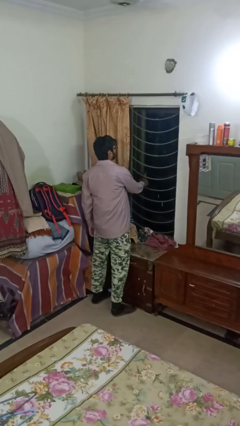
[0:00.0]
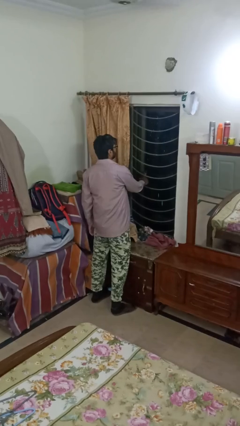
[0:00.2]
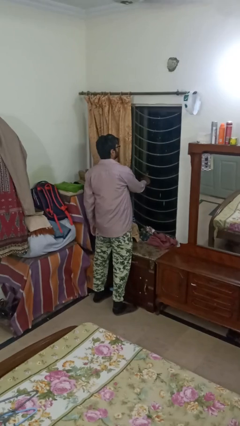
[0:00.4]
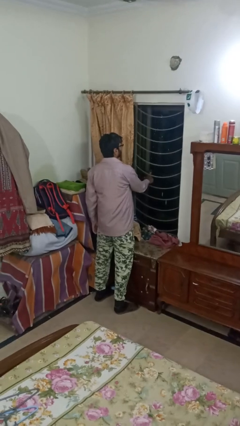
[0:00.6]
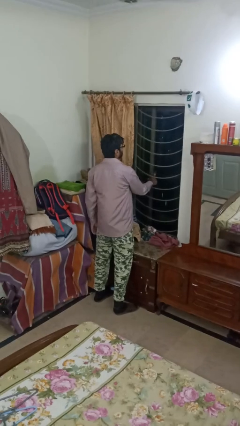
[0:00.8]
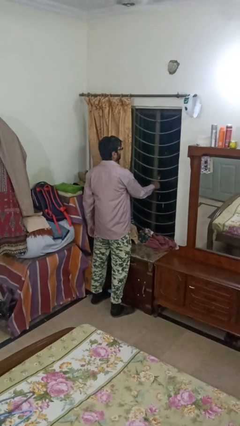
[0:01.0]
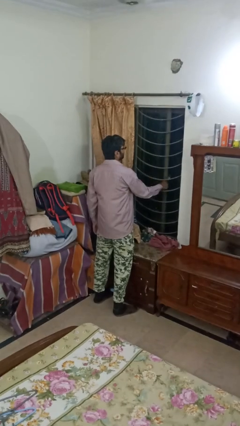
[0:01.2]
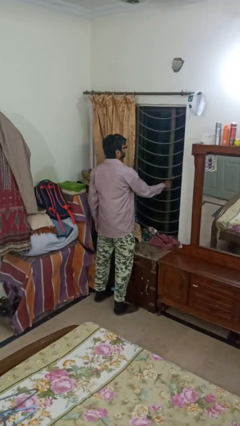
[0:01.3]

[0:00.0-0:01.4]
person closes home window

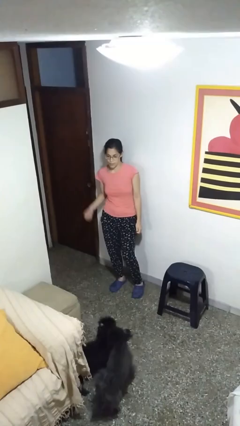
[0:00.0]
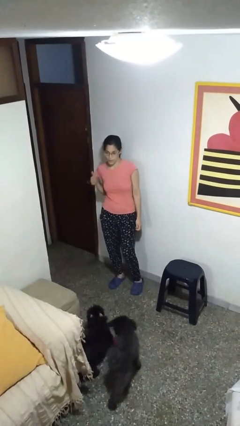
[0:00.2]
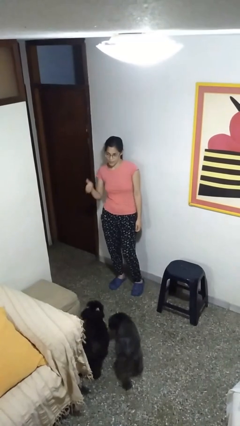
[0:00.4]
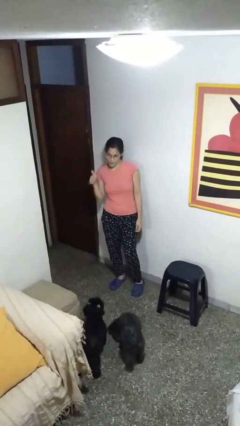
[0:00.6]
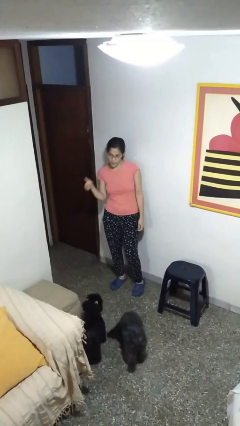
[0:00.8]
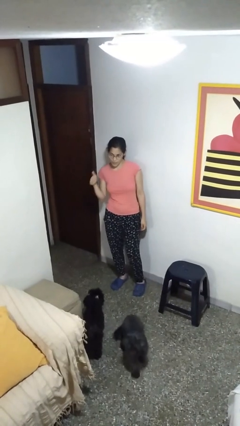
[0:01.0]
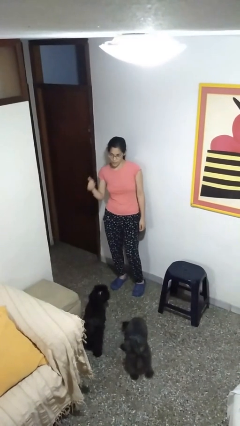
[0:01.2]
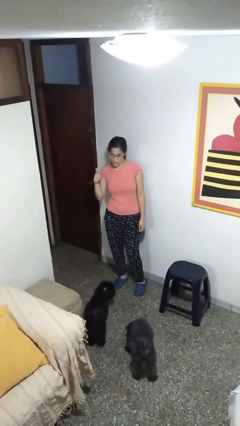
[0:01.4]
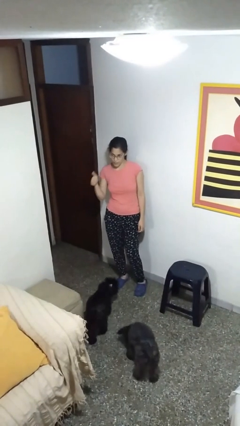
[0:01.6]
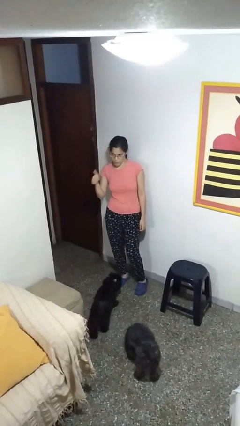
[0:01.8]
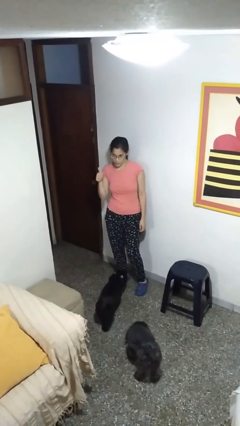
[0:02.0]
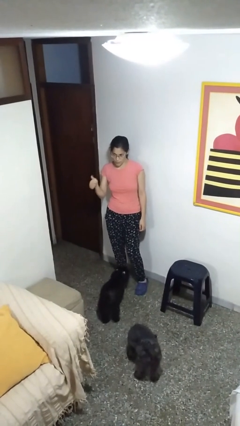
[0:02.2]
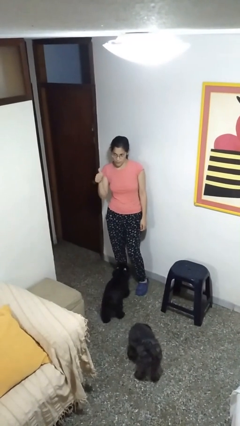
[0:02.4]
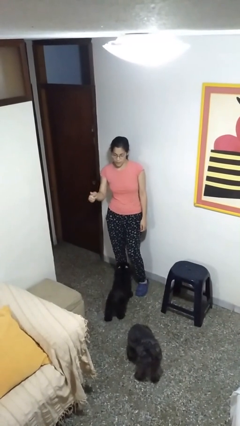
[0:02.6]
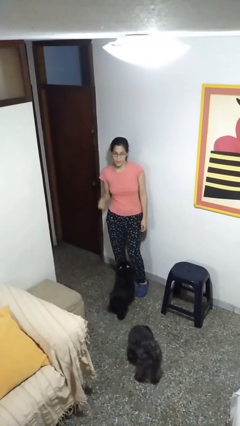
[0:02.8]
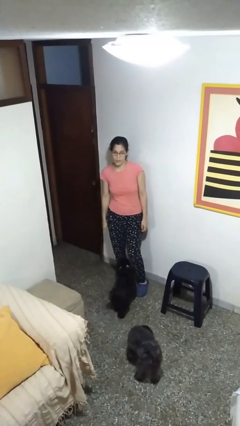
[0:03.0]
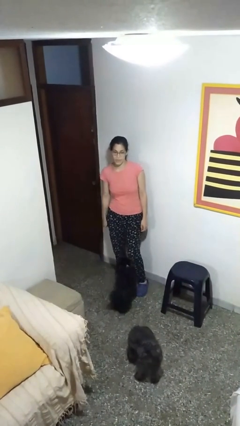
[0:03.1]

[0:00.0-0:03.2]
person gestures thumbs up

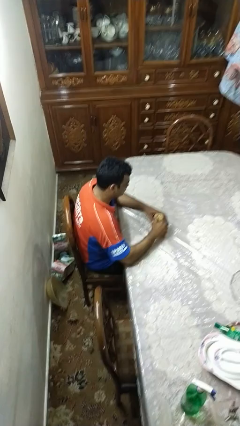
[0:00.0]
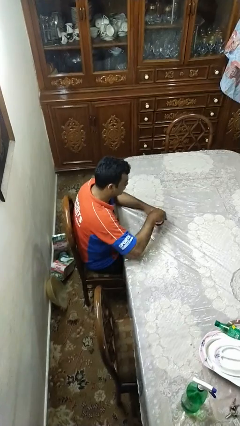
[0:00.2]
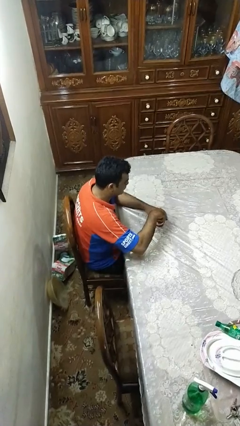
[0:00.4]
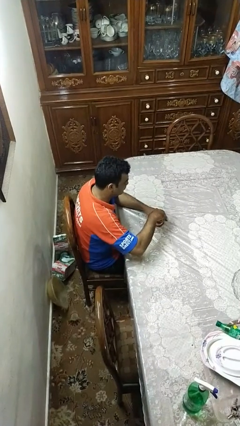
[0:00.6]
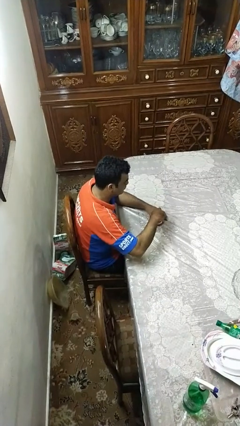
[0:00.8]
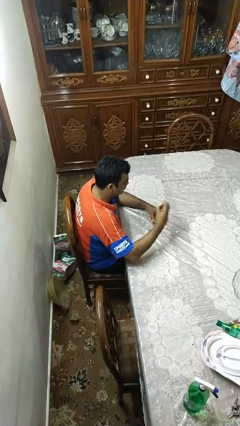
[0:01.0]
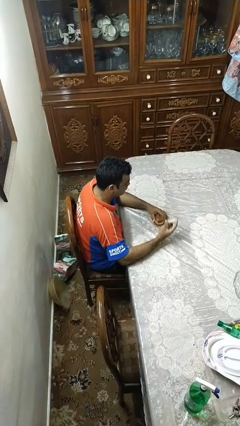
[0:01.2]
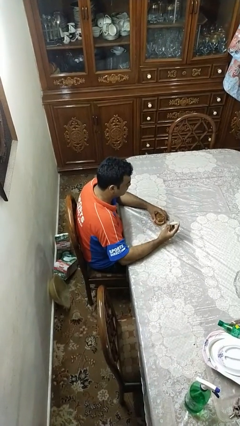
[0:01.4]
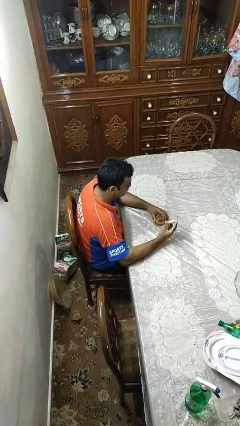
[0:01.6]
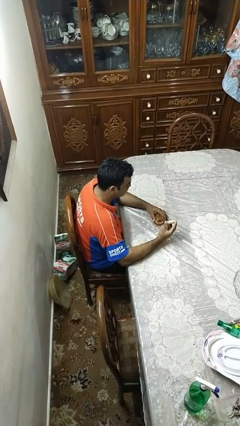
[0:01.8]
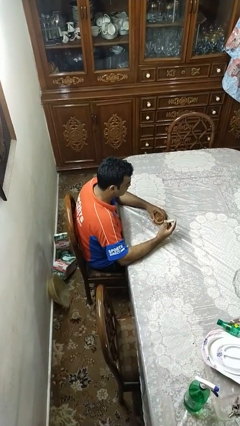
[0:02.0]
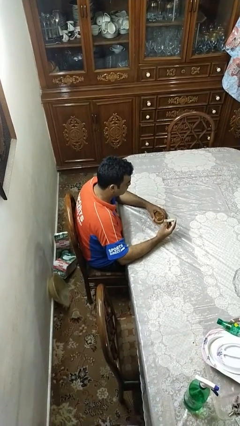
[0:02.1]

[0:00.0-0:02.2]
person opens jar

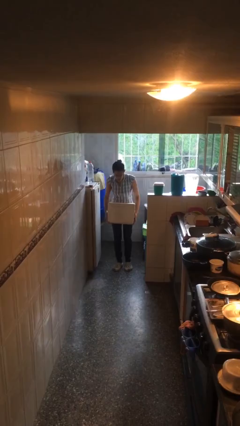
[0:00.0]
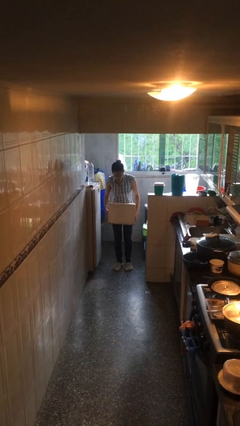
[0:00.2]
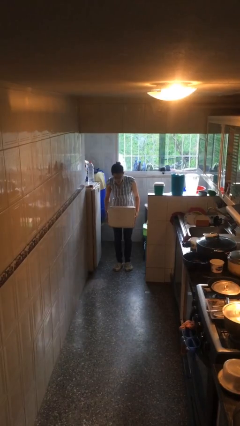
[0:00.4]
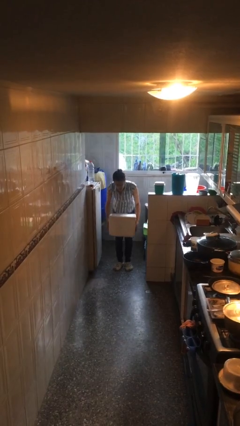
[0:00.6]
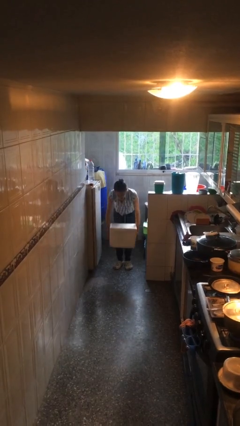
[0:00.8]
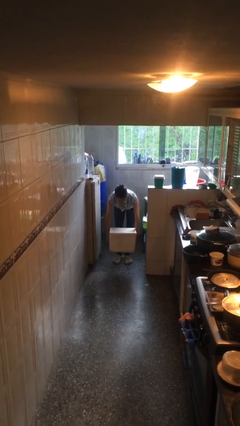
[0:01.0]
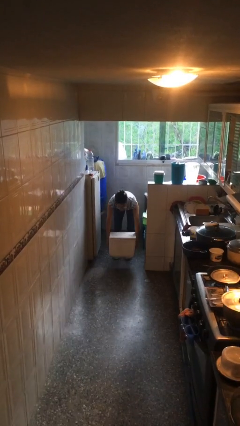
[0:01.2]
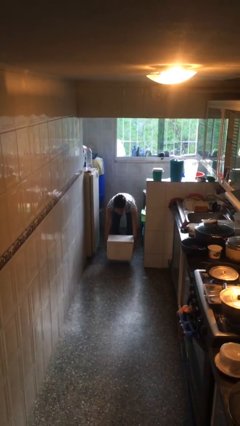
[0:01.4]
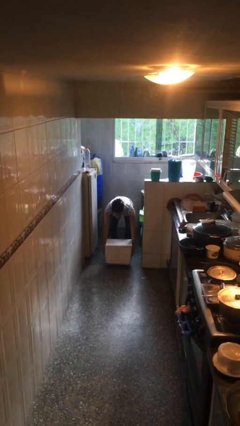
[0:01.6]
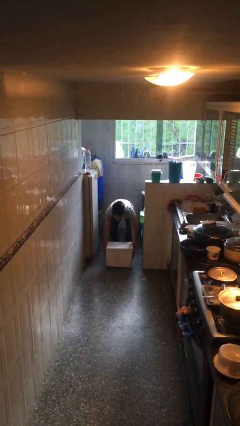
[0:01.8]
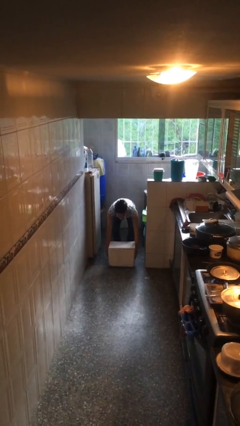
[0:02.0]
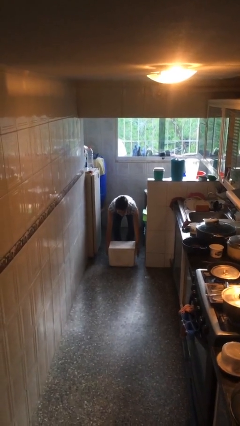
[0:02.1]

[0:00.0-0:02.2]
person puts down object on floor

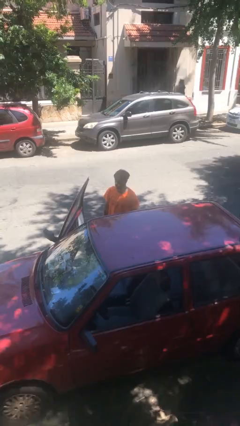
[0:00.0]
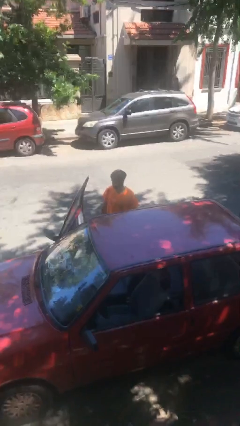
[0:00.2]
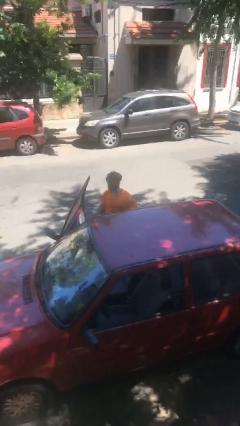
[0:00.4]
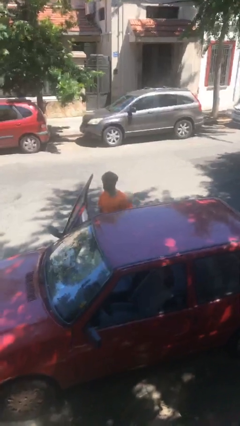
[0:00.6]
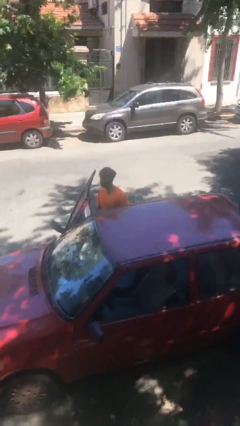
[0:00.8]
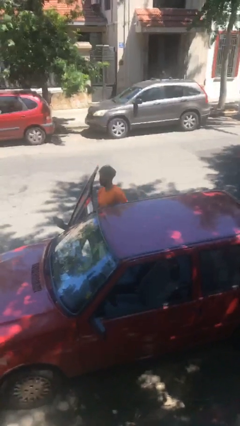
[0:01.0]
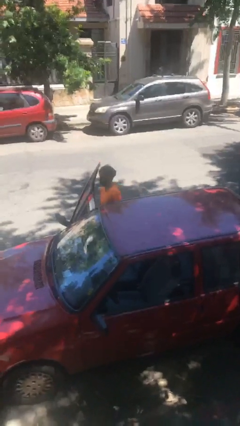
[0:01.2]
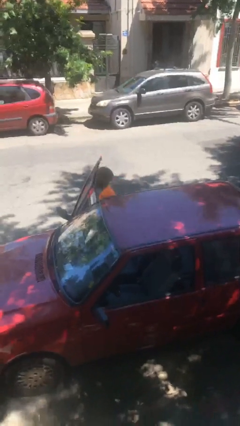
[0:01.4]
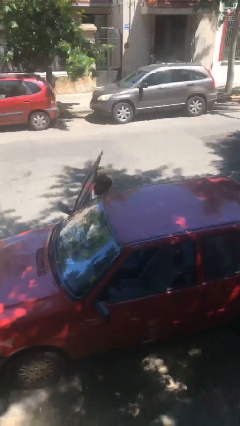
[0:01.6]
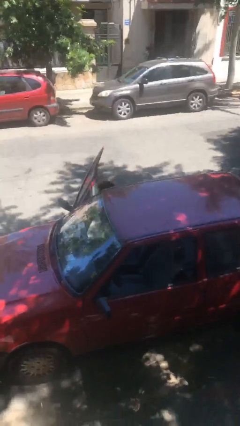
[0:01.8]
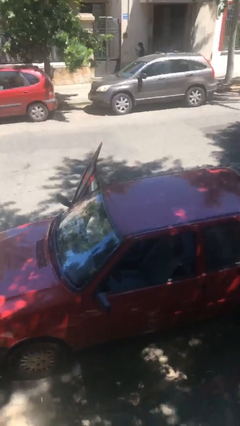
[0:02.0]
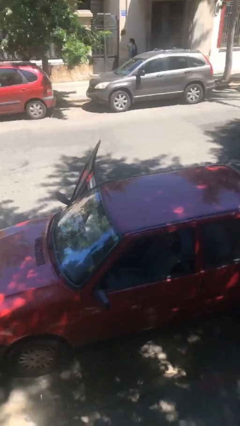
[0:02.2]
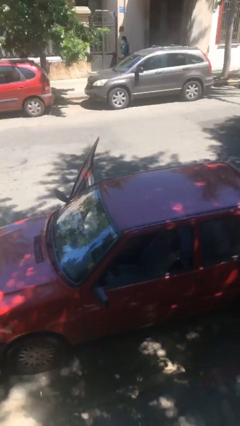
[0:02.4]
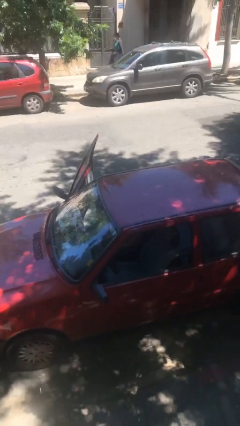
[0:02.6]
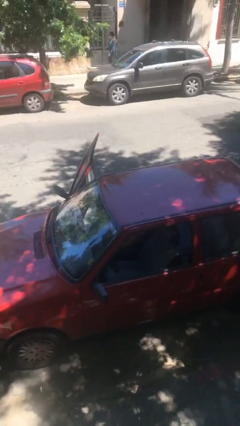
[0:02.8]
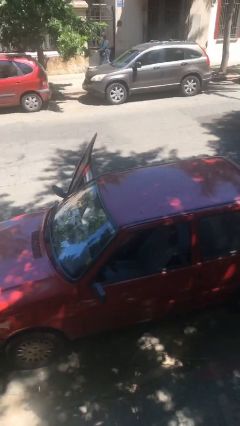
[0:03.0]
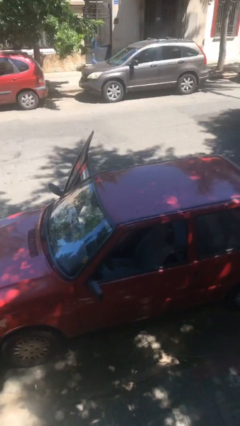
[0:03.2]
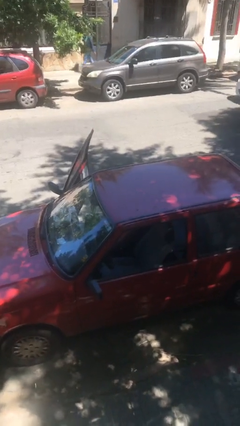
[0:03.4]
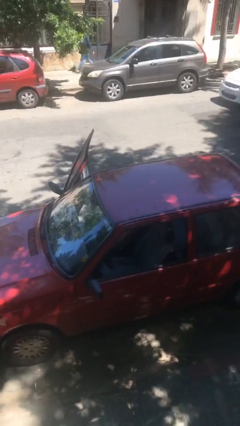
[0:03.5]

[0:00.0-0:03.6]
person enters car

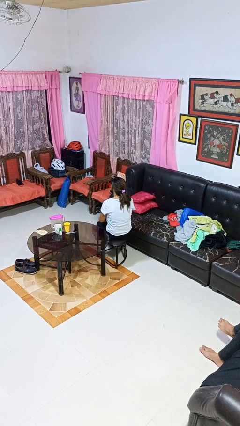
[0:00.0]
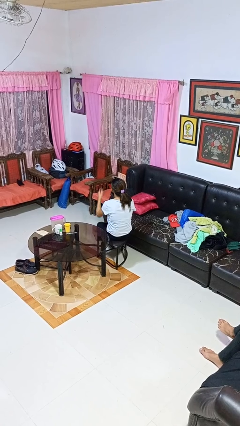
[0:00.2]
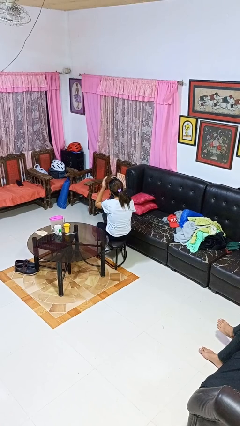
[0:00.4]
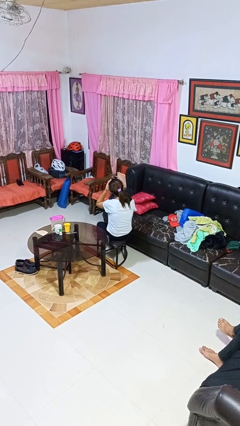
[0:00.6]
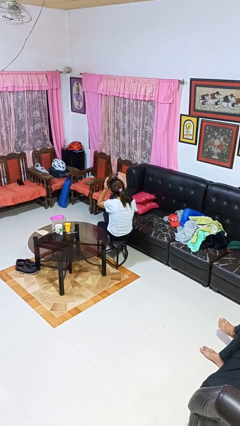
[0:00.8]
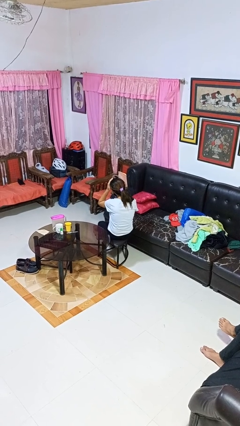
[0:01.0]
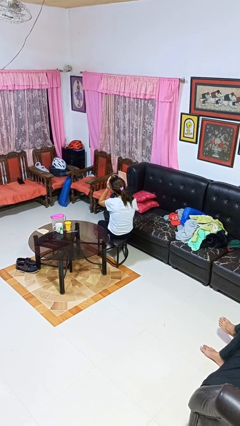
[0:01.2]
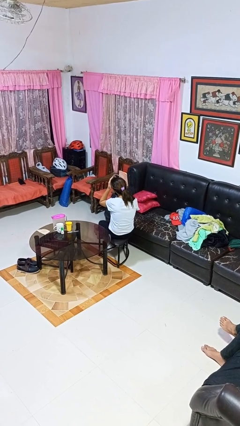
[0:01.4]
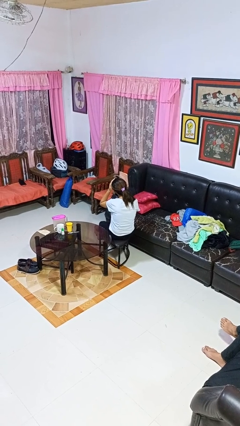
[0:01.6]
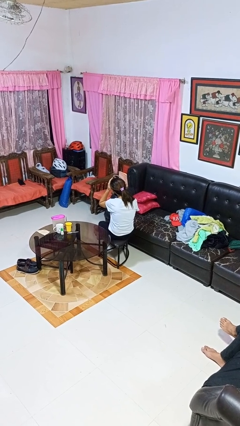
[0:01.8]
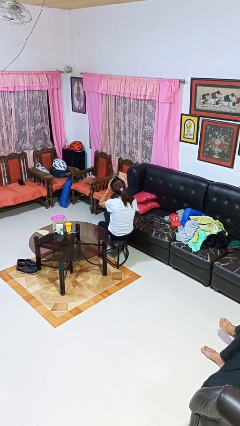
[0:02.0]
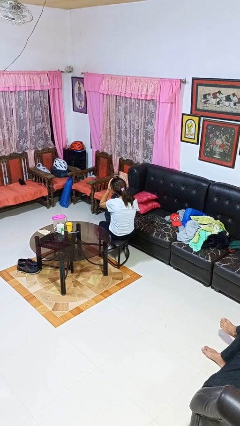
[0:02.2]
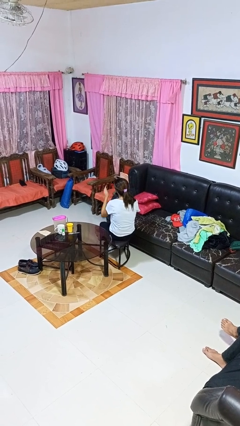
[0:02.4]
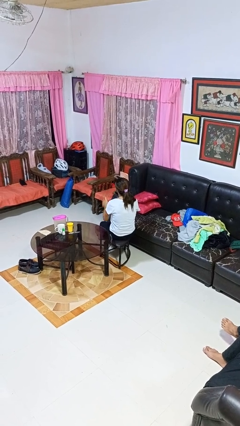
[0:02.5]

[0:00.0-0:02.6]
person pats head

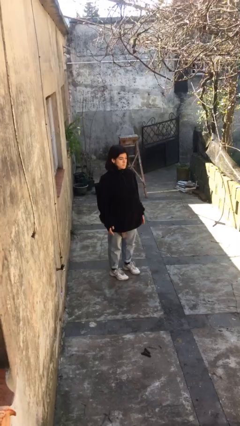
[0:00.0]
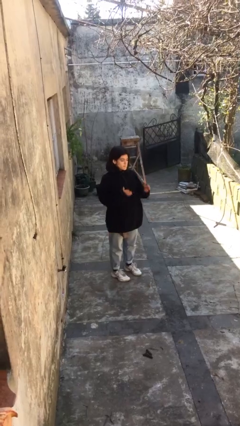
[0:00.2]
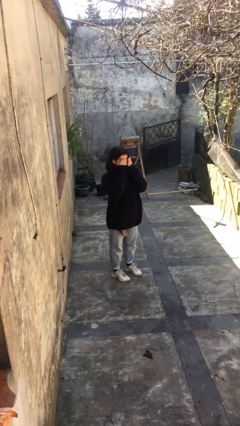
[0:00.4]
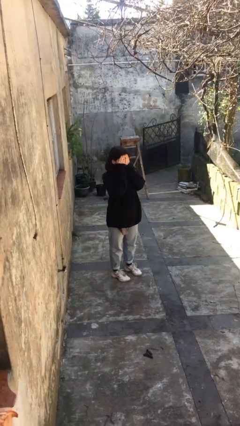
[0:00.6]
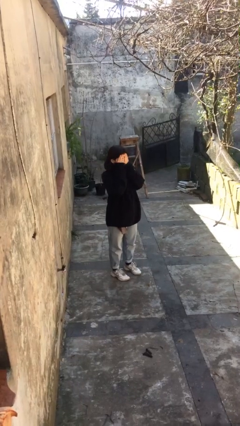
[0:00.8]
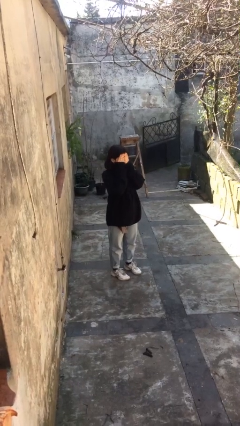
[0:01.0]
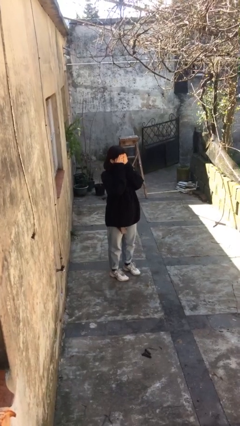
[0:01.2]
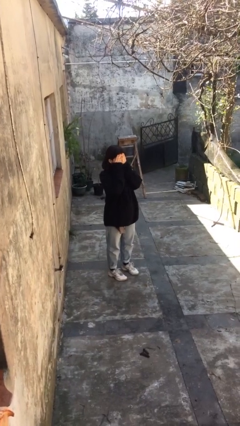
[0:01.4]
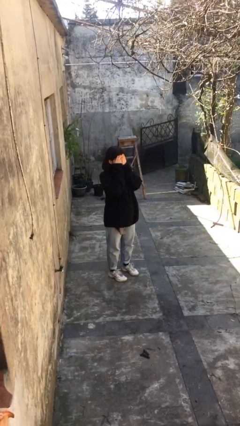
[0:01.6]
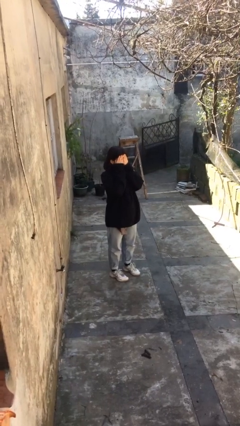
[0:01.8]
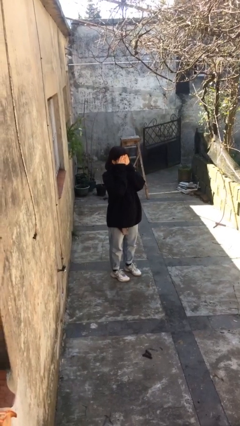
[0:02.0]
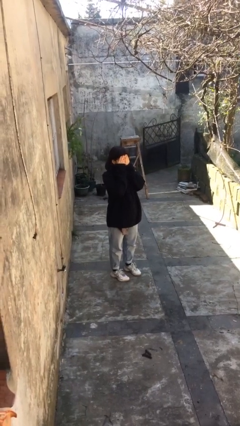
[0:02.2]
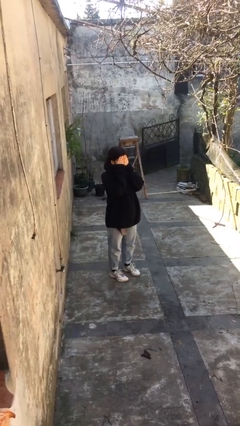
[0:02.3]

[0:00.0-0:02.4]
person covers face with hands
